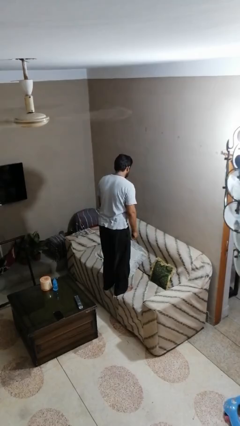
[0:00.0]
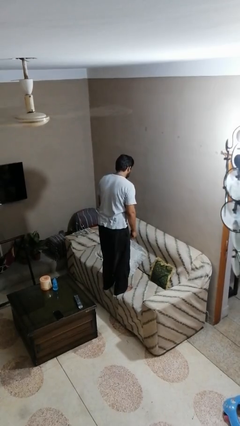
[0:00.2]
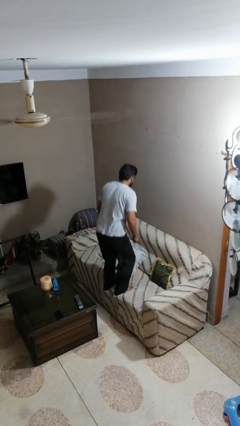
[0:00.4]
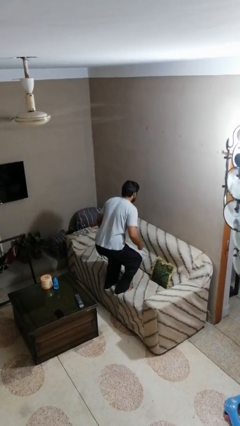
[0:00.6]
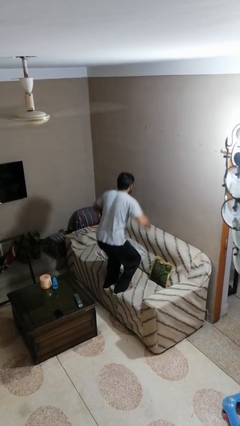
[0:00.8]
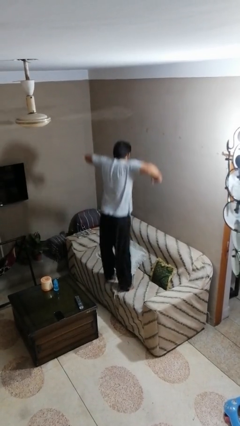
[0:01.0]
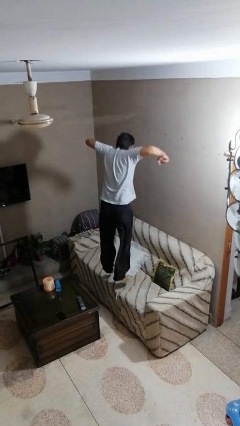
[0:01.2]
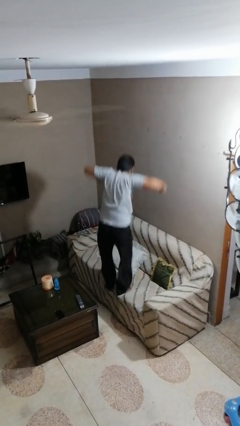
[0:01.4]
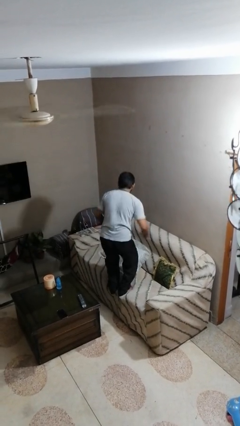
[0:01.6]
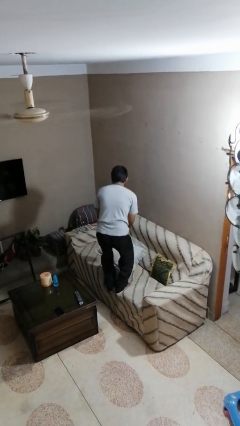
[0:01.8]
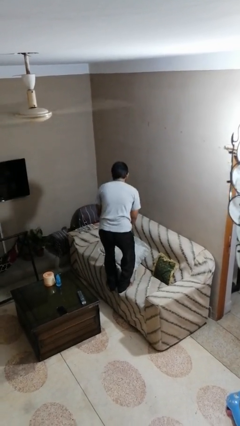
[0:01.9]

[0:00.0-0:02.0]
person jumps on couch

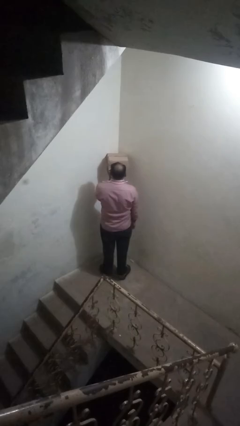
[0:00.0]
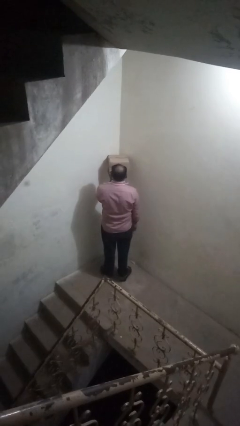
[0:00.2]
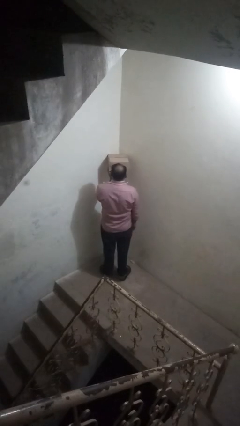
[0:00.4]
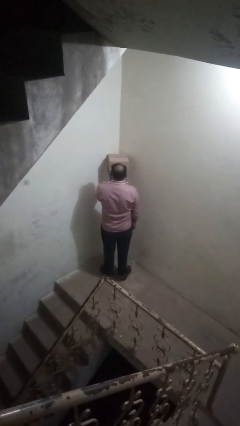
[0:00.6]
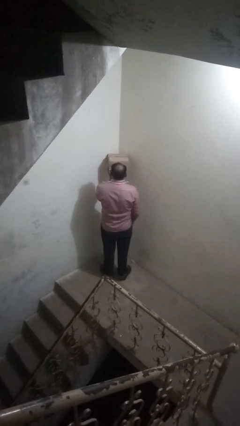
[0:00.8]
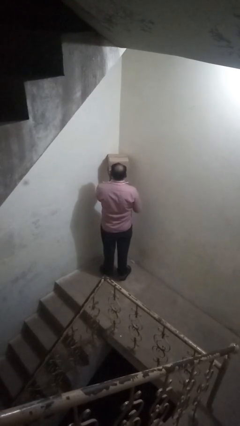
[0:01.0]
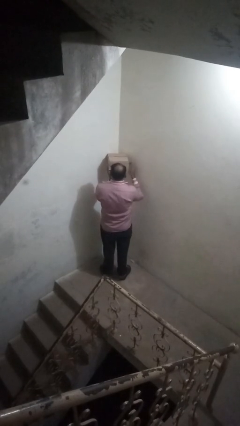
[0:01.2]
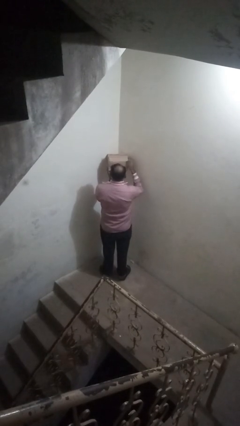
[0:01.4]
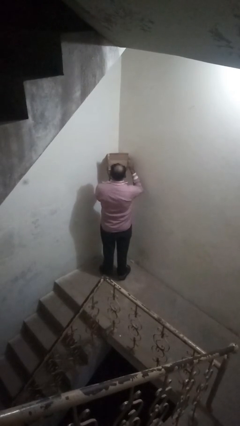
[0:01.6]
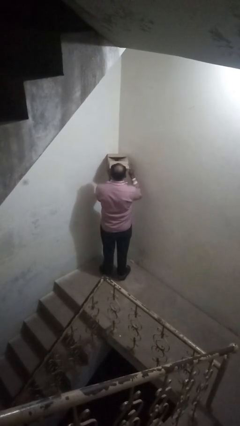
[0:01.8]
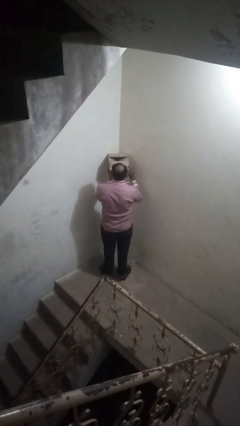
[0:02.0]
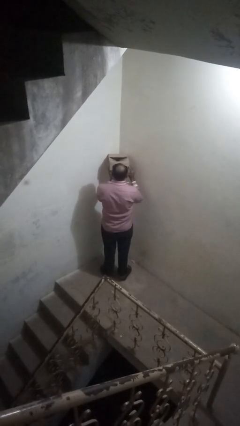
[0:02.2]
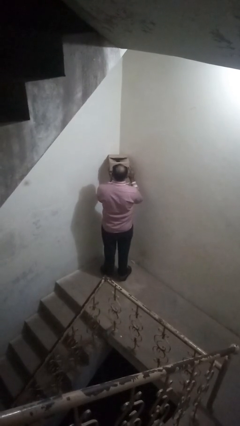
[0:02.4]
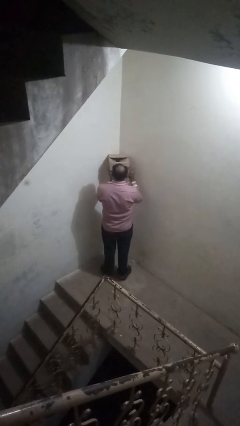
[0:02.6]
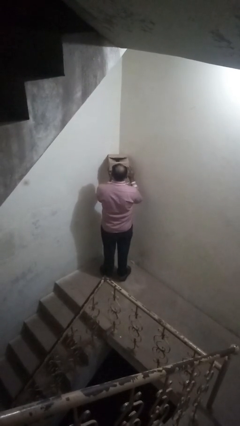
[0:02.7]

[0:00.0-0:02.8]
person opens mailbox

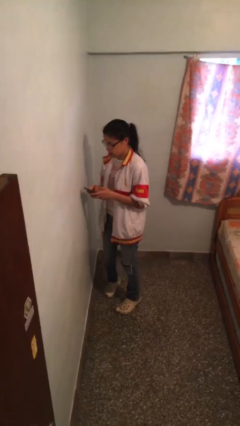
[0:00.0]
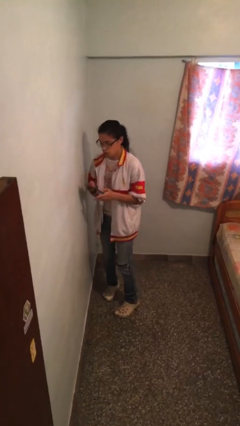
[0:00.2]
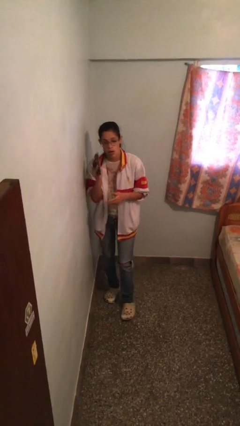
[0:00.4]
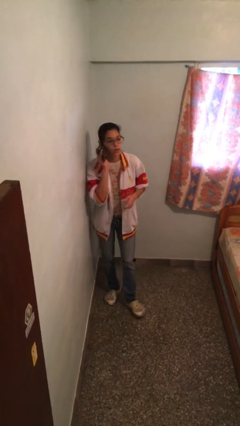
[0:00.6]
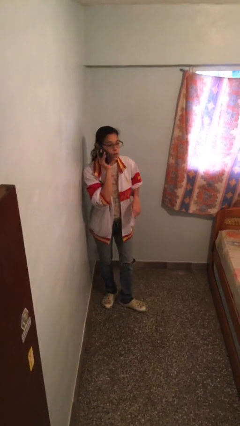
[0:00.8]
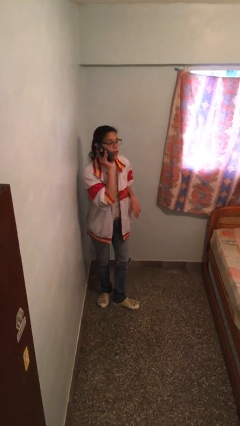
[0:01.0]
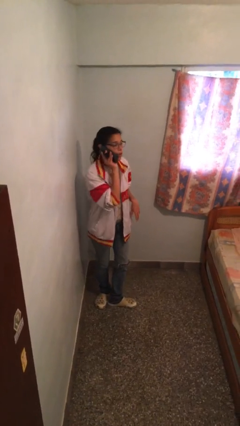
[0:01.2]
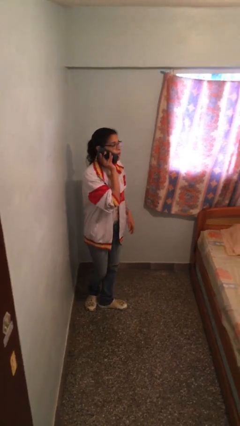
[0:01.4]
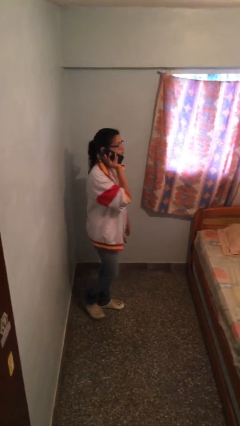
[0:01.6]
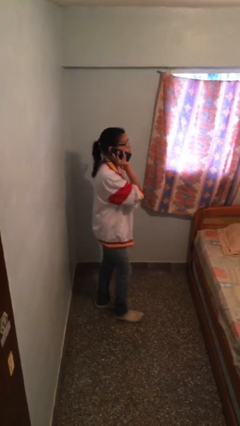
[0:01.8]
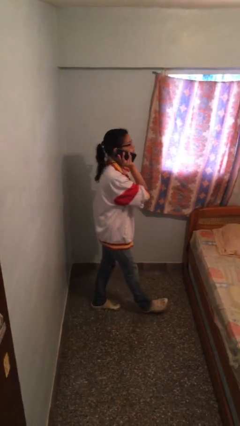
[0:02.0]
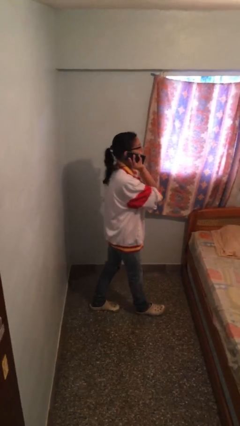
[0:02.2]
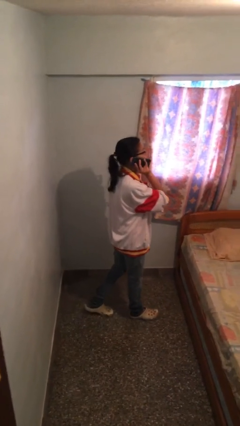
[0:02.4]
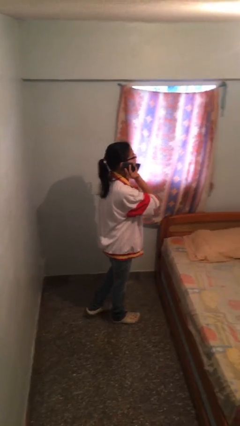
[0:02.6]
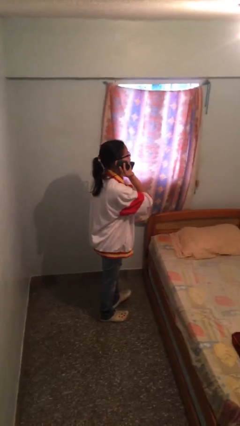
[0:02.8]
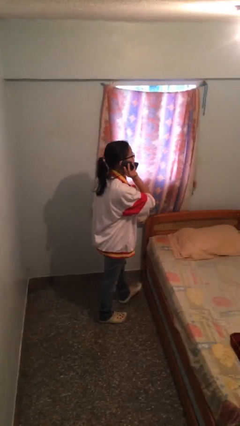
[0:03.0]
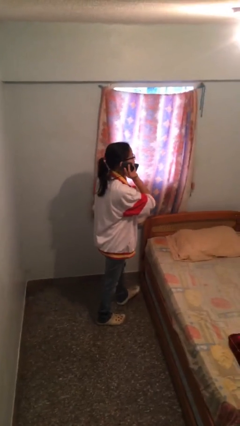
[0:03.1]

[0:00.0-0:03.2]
person talks on phone

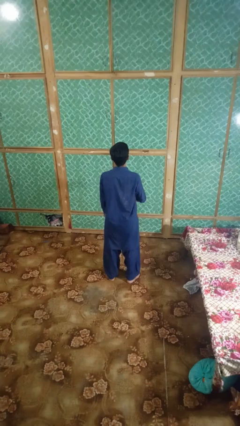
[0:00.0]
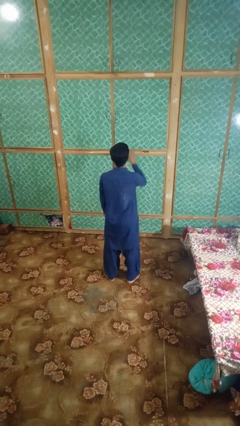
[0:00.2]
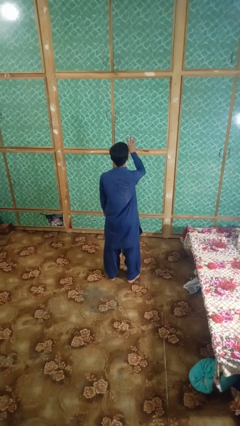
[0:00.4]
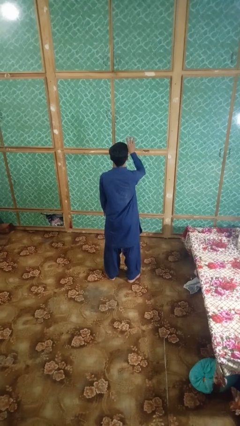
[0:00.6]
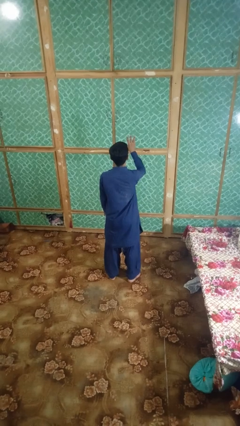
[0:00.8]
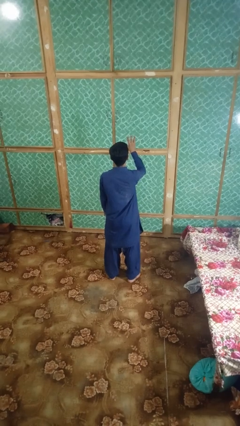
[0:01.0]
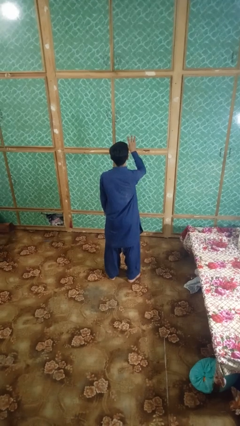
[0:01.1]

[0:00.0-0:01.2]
person gestures number three

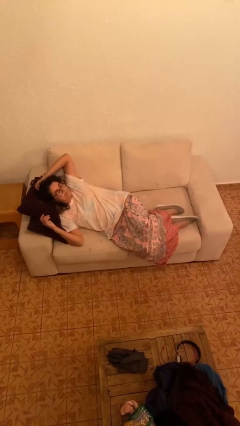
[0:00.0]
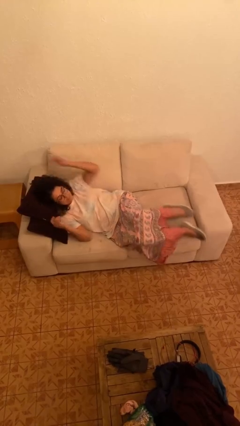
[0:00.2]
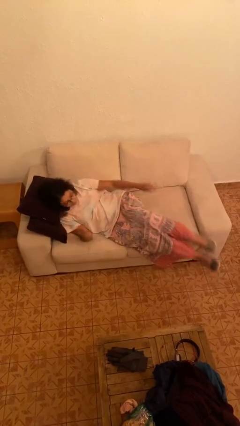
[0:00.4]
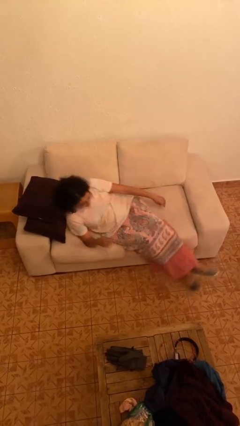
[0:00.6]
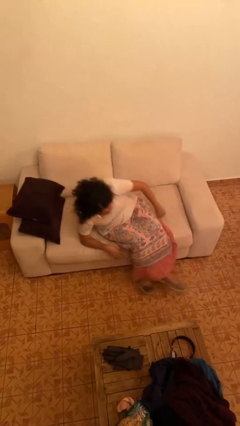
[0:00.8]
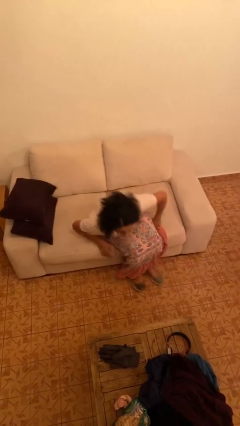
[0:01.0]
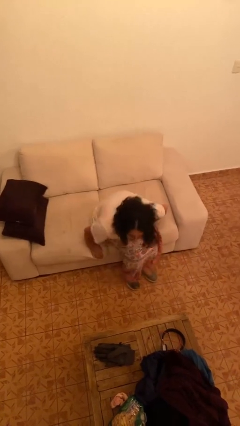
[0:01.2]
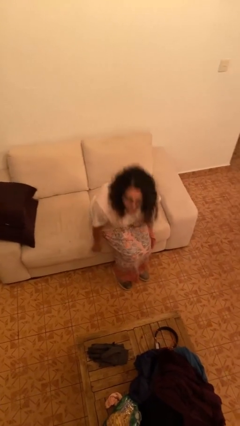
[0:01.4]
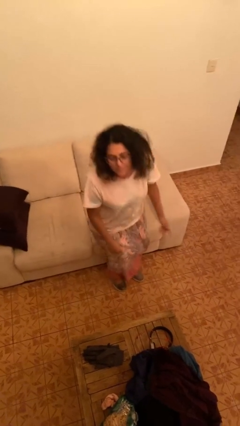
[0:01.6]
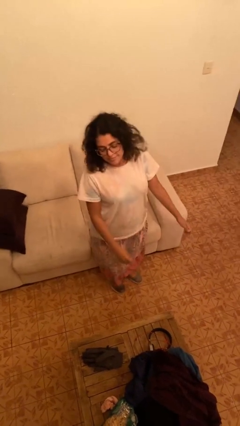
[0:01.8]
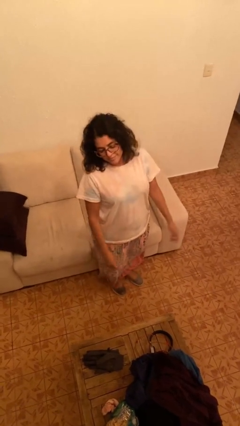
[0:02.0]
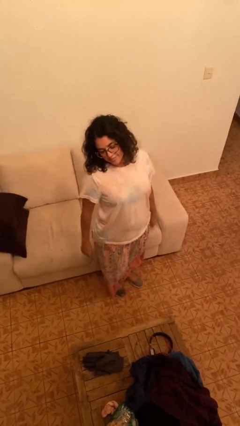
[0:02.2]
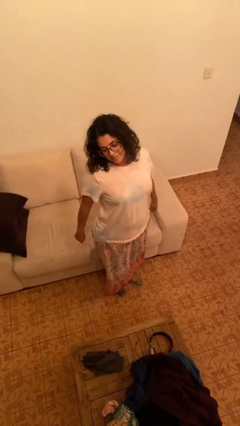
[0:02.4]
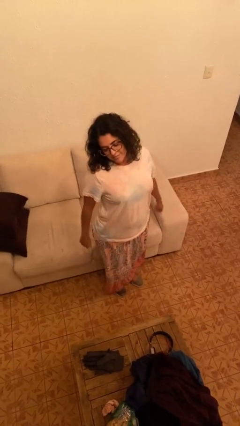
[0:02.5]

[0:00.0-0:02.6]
person stands up

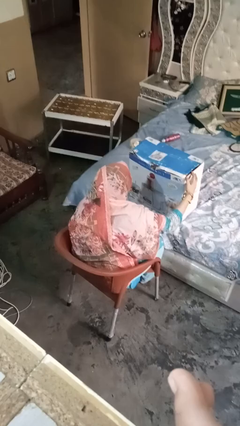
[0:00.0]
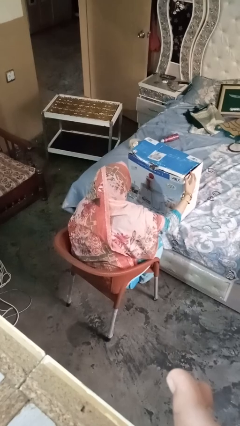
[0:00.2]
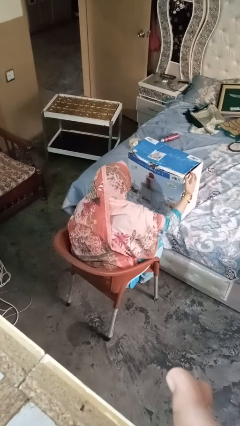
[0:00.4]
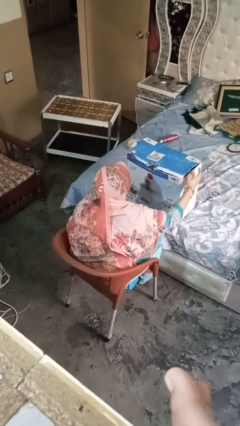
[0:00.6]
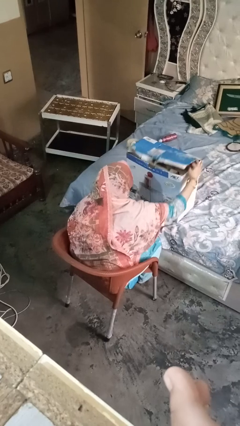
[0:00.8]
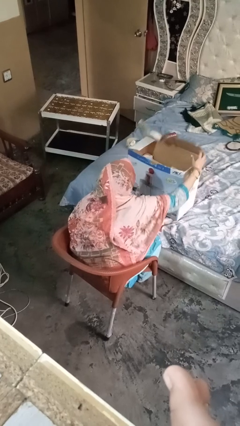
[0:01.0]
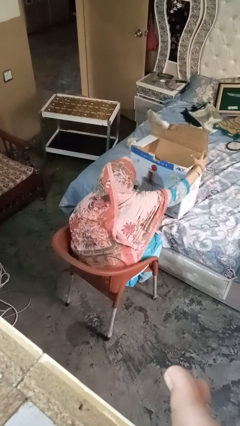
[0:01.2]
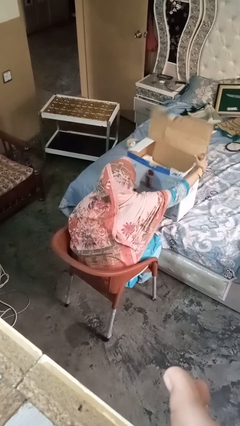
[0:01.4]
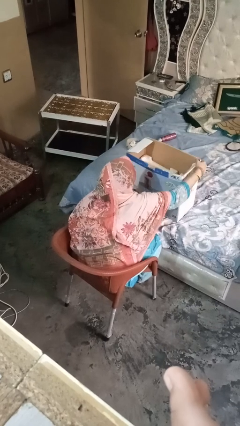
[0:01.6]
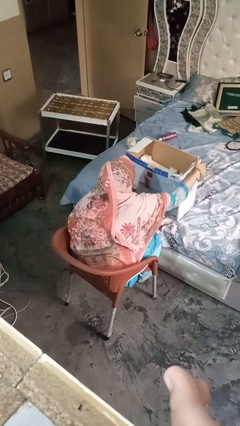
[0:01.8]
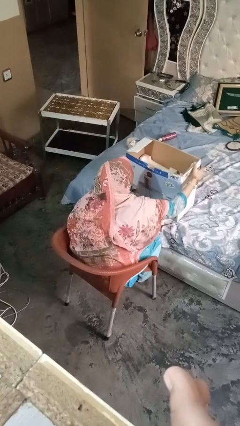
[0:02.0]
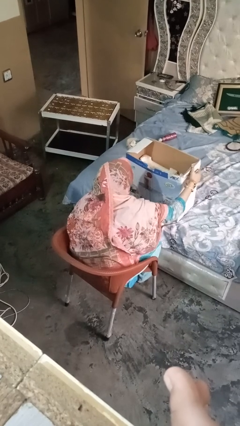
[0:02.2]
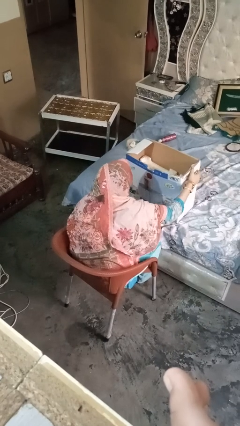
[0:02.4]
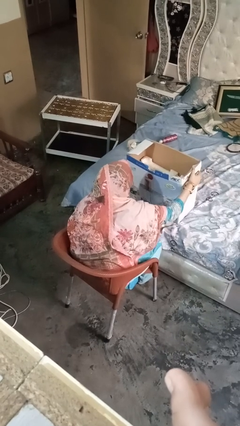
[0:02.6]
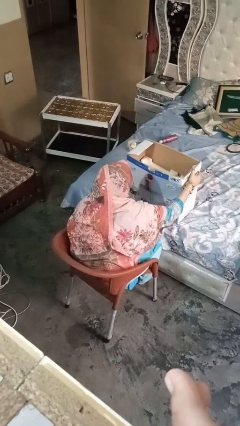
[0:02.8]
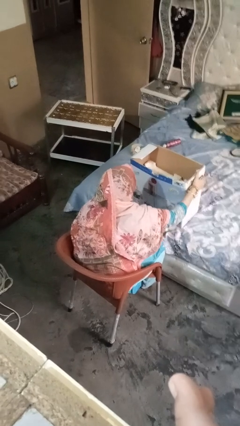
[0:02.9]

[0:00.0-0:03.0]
person opens box

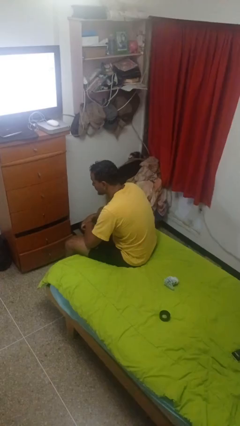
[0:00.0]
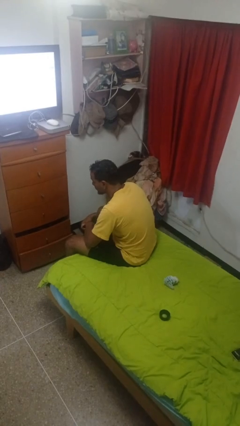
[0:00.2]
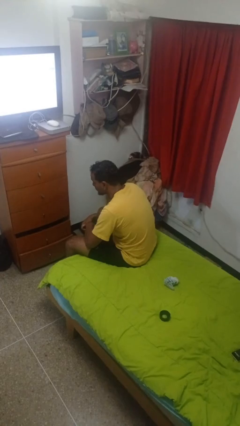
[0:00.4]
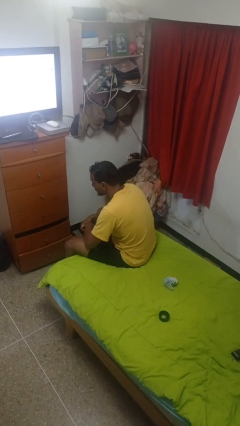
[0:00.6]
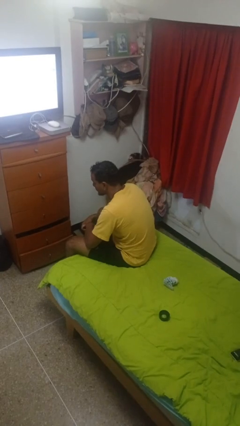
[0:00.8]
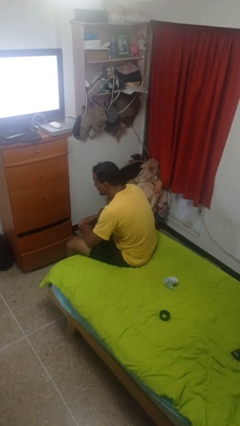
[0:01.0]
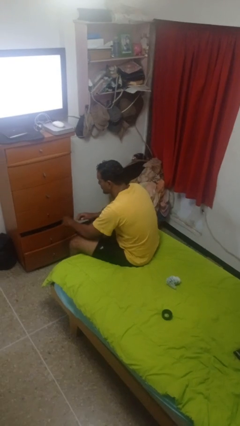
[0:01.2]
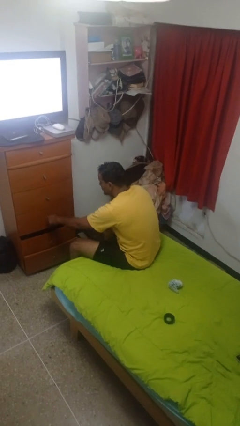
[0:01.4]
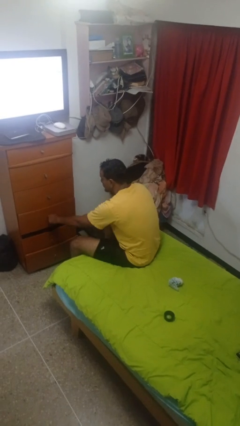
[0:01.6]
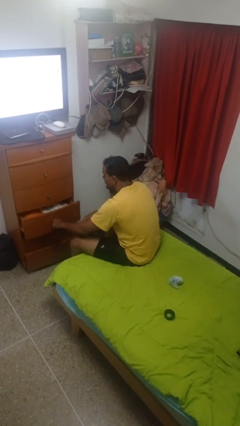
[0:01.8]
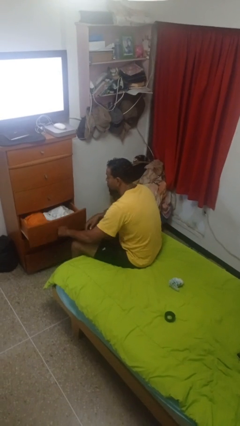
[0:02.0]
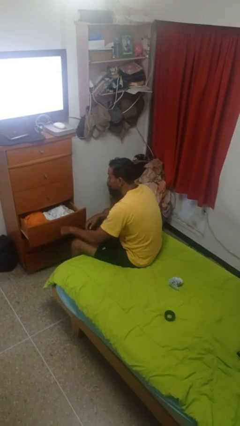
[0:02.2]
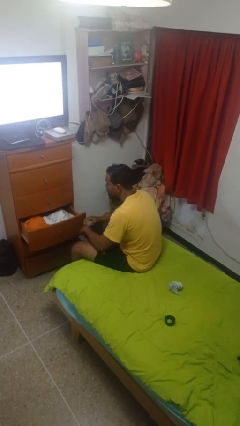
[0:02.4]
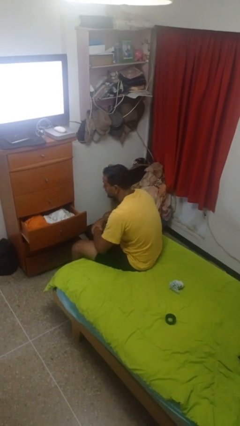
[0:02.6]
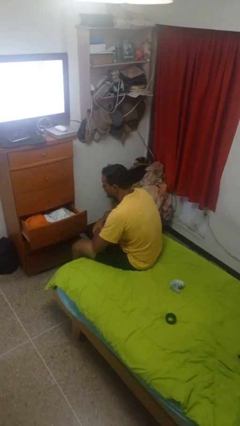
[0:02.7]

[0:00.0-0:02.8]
person opens dresser drawer
